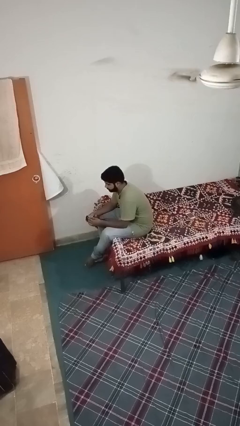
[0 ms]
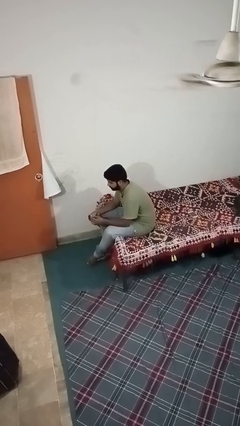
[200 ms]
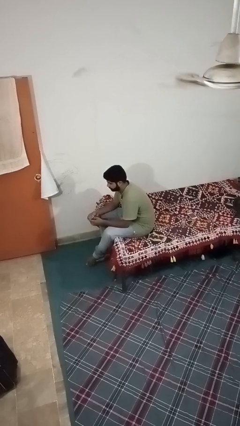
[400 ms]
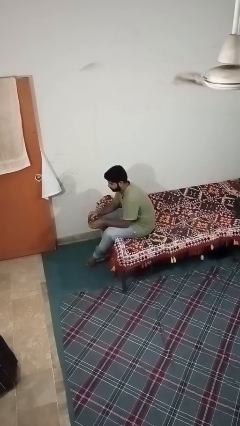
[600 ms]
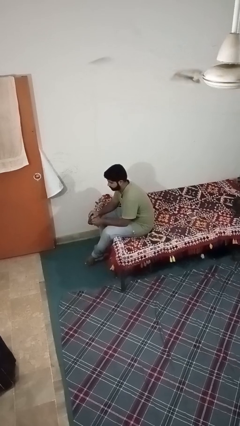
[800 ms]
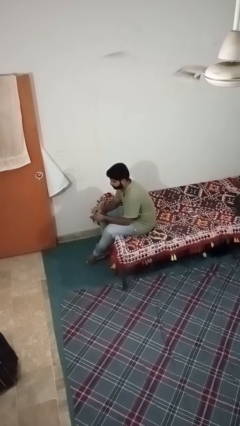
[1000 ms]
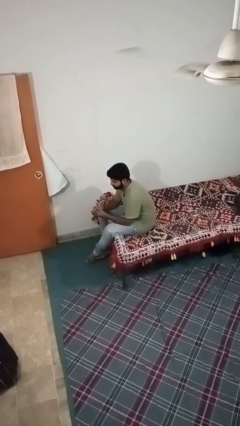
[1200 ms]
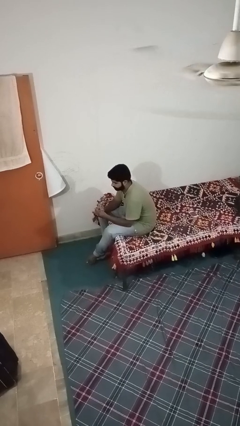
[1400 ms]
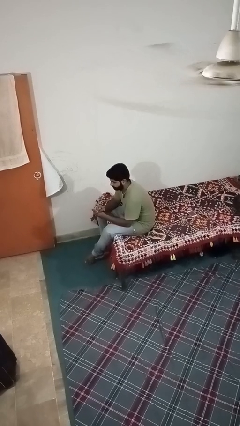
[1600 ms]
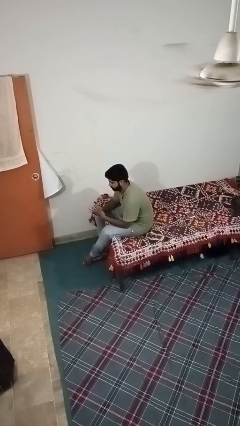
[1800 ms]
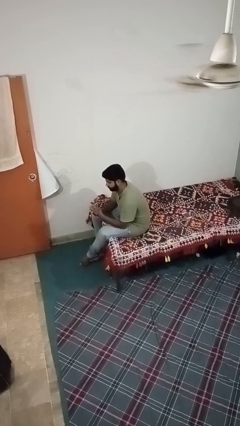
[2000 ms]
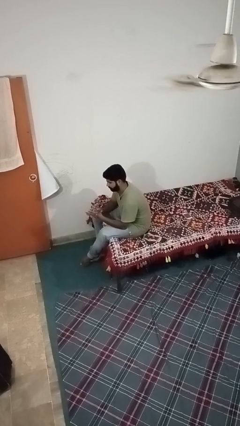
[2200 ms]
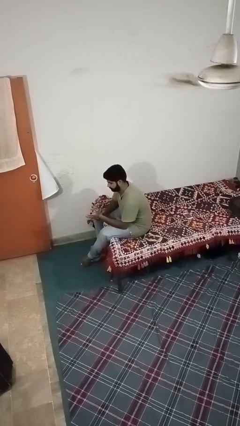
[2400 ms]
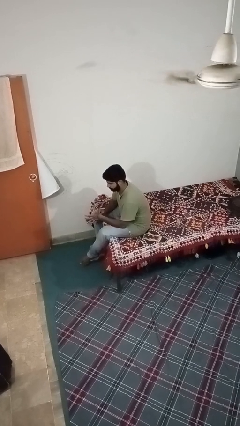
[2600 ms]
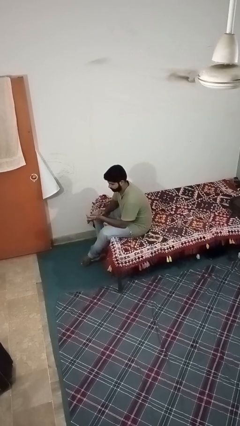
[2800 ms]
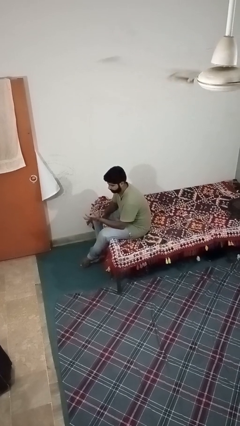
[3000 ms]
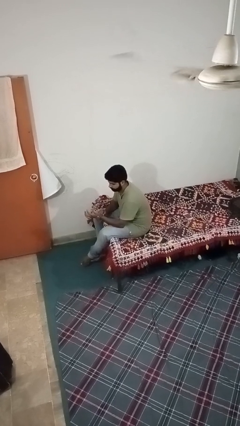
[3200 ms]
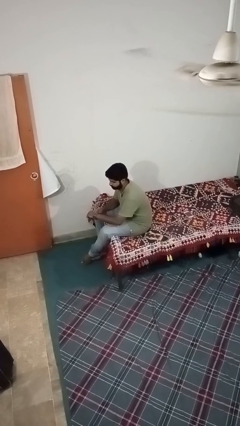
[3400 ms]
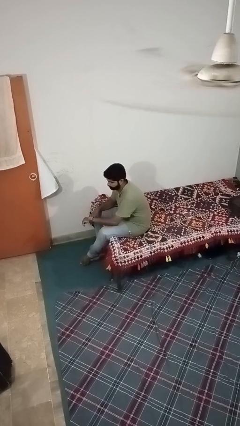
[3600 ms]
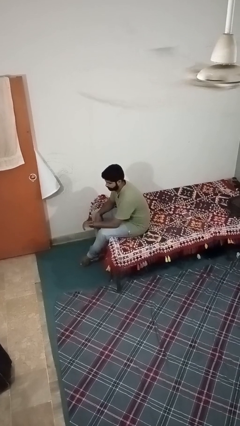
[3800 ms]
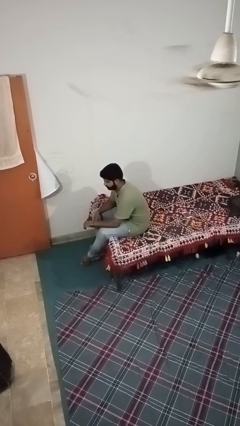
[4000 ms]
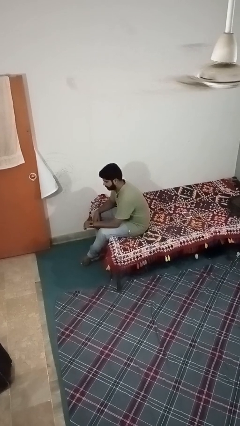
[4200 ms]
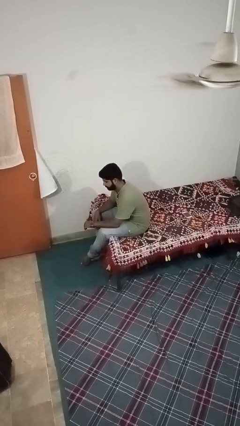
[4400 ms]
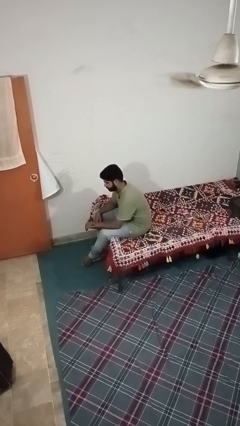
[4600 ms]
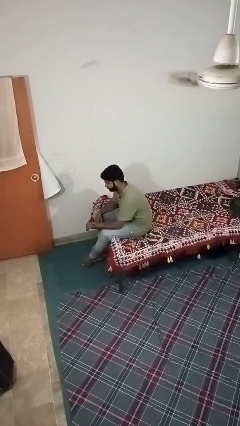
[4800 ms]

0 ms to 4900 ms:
person puts on wristwatch

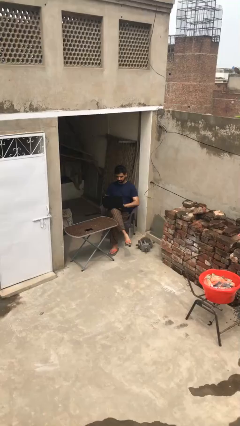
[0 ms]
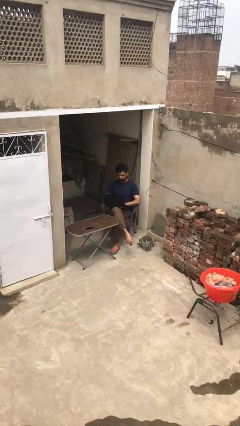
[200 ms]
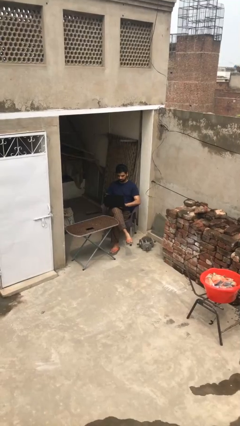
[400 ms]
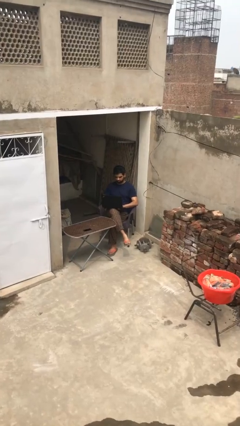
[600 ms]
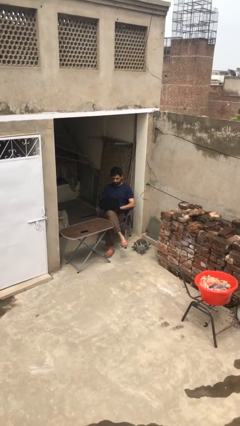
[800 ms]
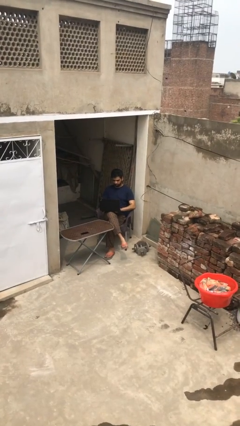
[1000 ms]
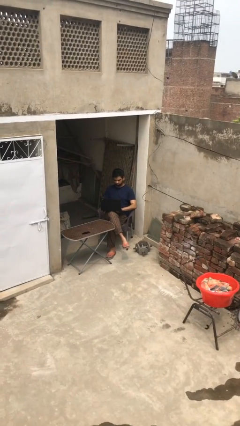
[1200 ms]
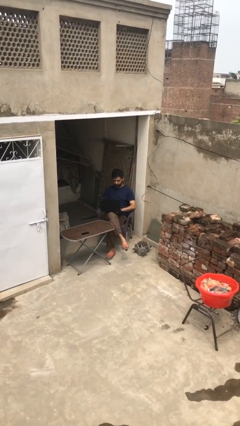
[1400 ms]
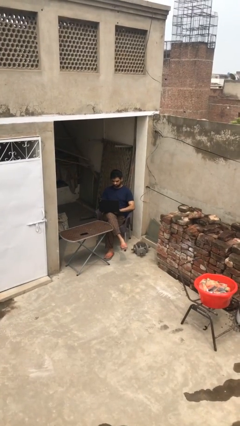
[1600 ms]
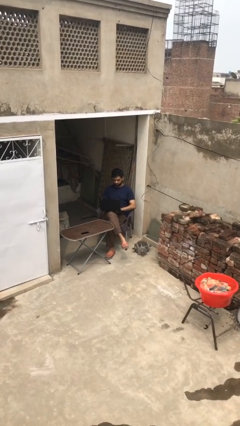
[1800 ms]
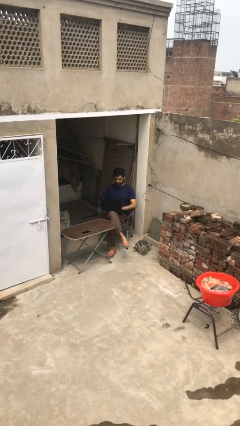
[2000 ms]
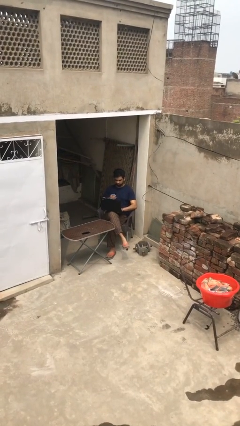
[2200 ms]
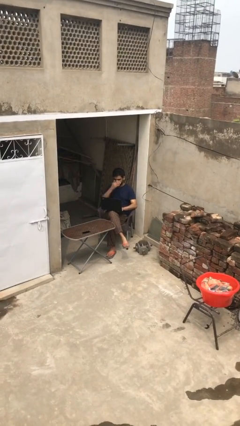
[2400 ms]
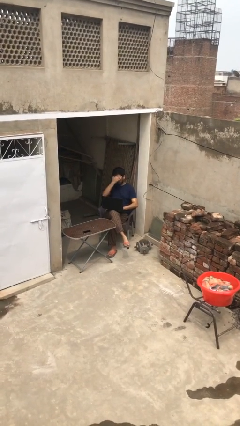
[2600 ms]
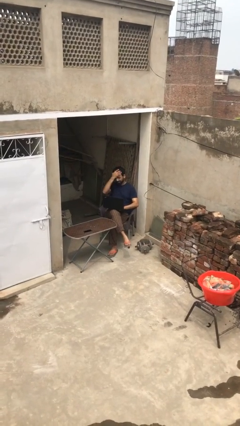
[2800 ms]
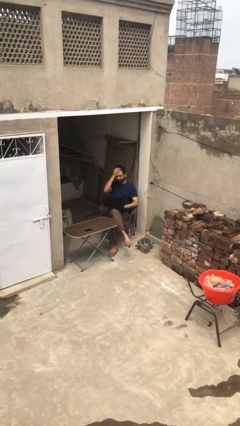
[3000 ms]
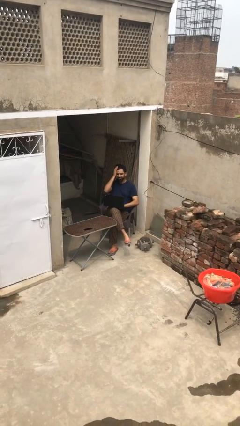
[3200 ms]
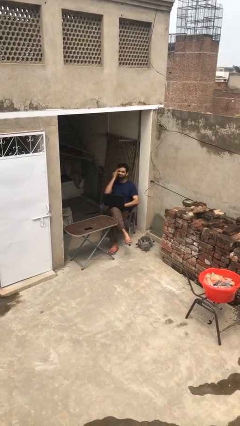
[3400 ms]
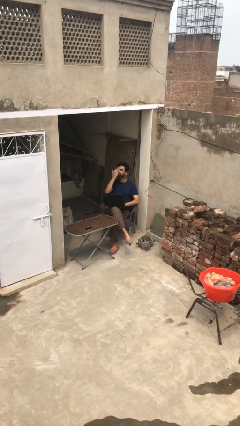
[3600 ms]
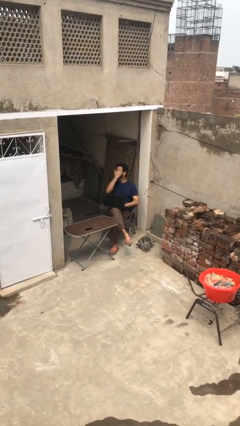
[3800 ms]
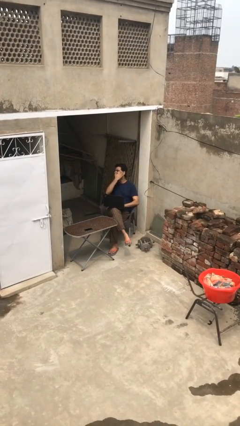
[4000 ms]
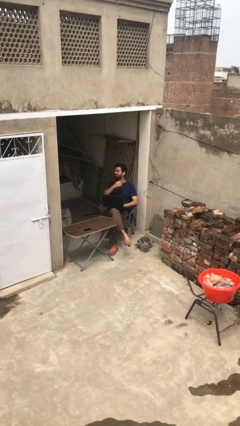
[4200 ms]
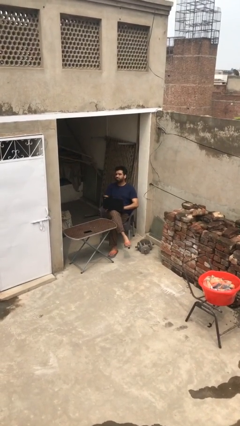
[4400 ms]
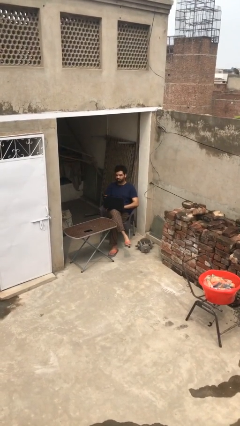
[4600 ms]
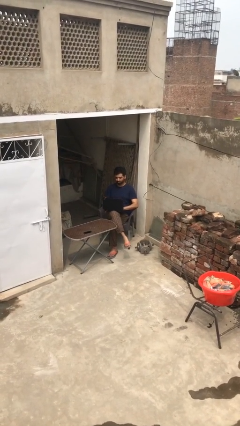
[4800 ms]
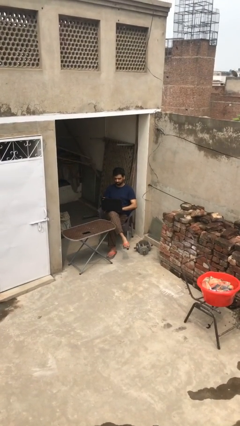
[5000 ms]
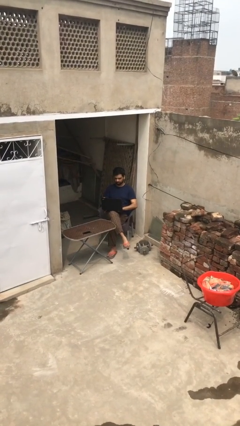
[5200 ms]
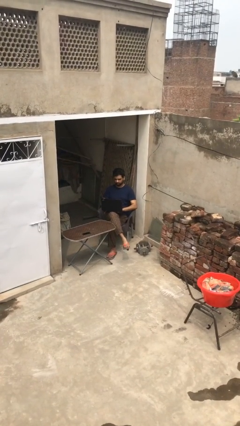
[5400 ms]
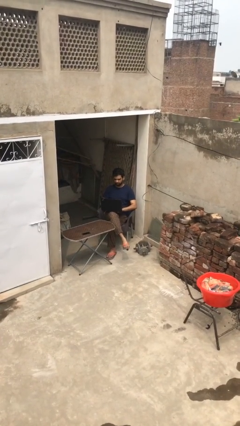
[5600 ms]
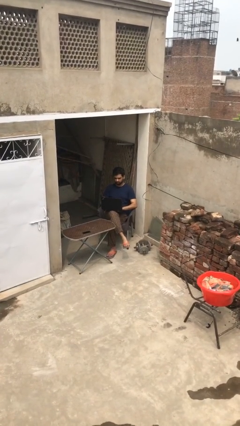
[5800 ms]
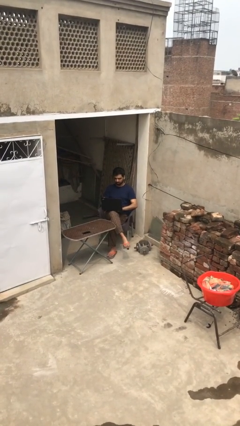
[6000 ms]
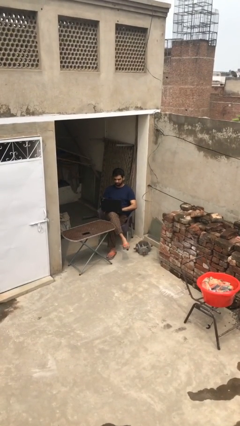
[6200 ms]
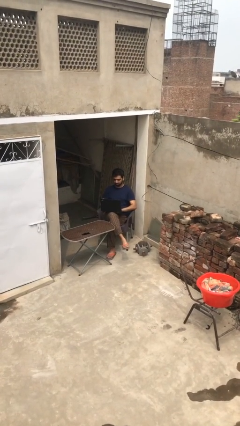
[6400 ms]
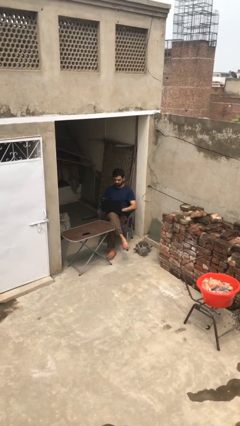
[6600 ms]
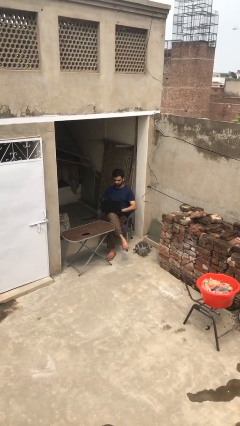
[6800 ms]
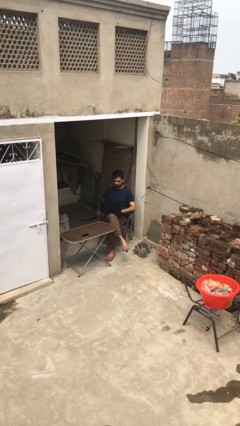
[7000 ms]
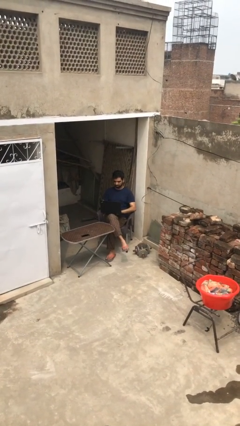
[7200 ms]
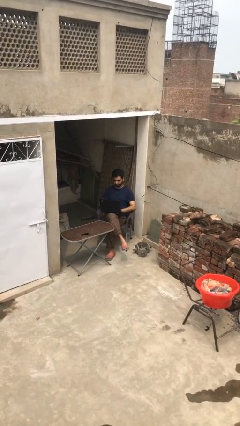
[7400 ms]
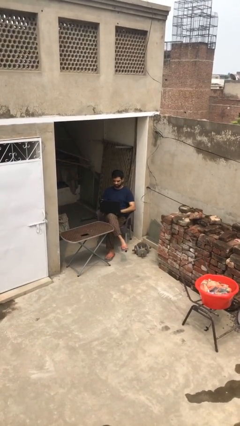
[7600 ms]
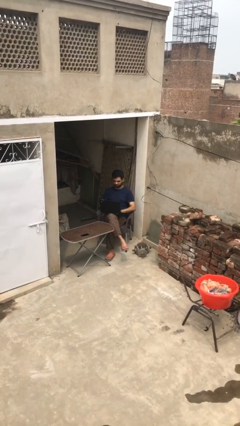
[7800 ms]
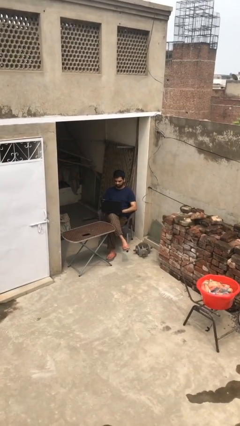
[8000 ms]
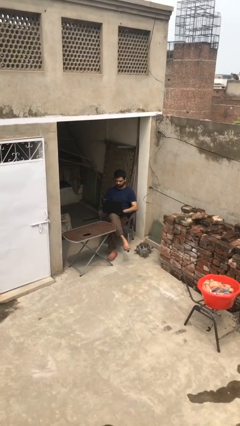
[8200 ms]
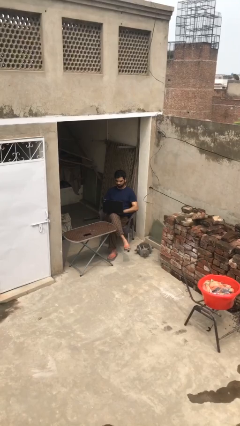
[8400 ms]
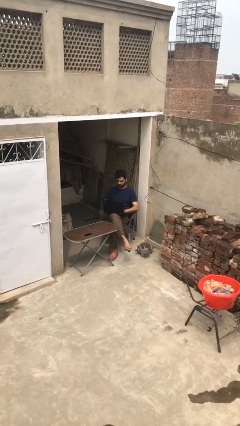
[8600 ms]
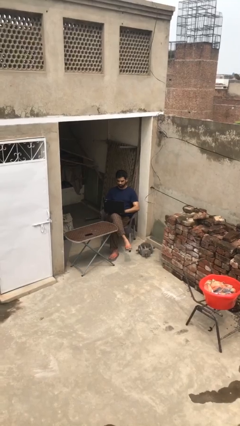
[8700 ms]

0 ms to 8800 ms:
person interacts with laptop

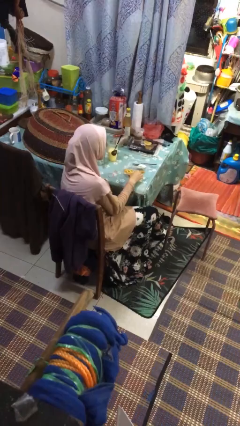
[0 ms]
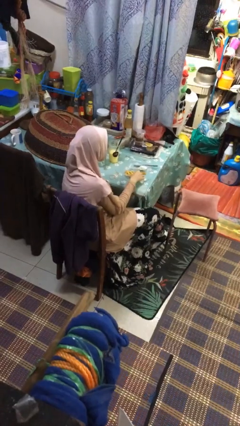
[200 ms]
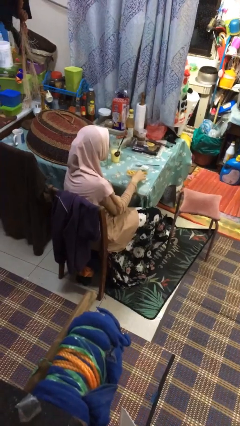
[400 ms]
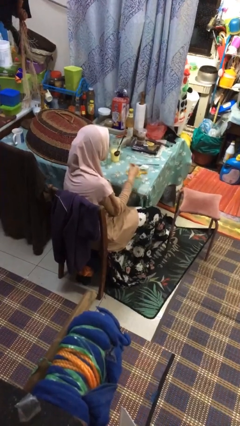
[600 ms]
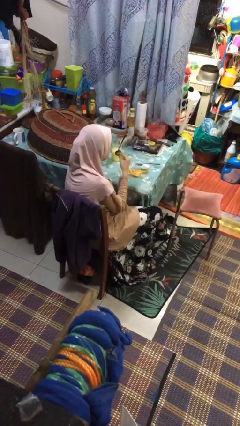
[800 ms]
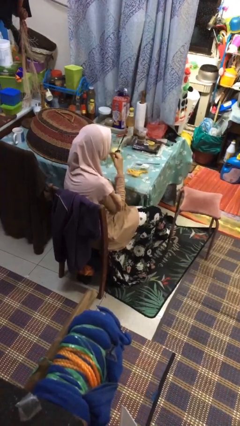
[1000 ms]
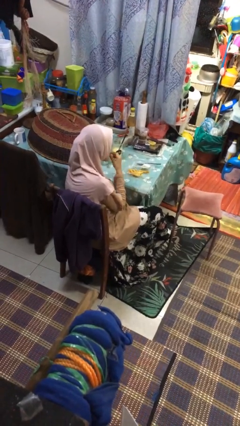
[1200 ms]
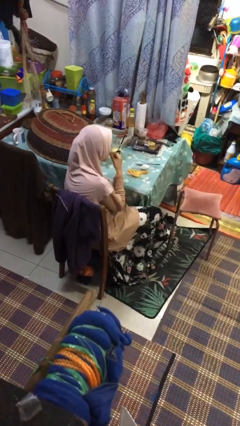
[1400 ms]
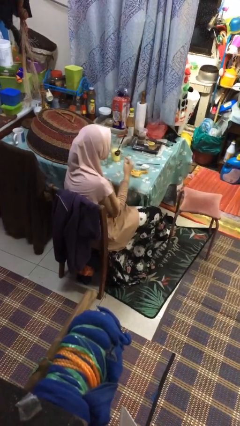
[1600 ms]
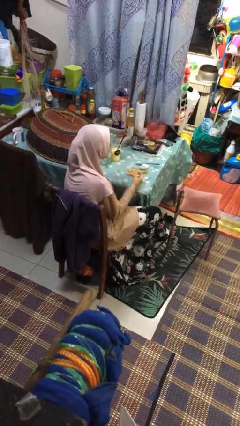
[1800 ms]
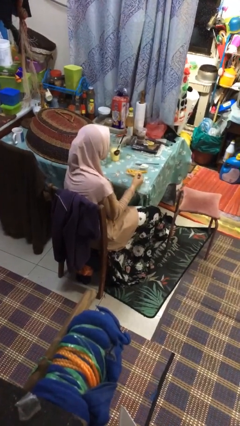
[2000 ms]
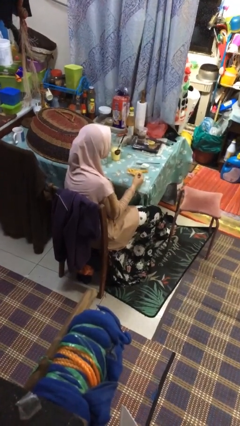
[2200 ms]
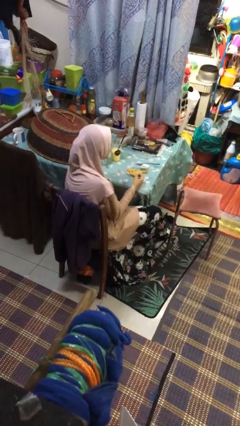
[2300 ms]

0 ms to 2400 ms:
person eats with hands

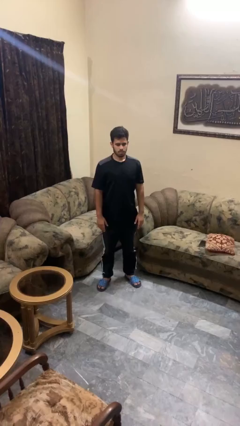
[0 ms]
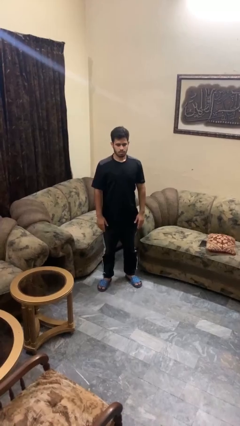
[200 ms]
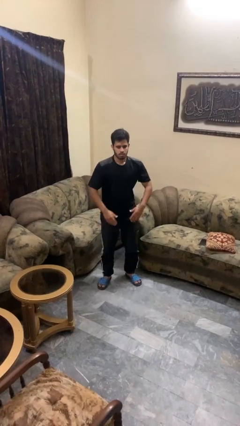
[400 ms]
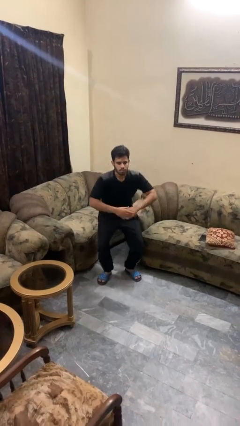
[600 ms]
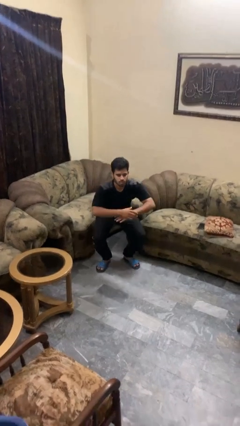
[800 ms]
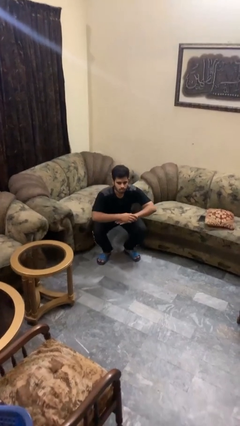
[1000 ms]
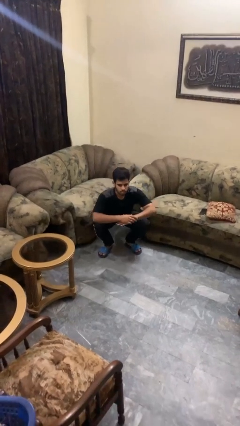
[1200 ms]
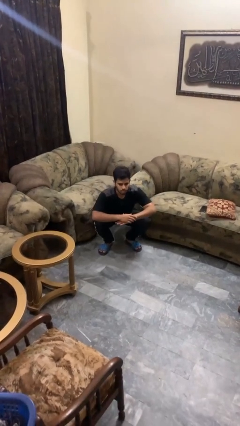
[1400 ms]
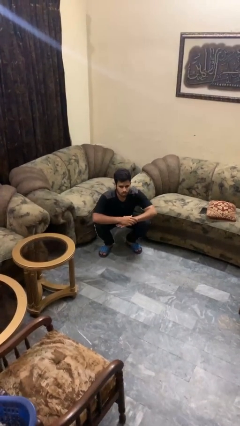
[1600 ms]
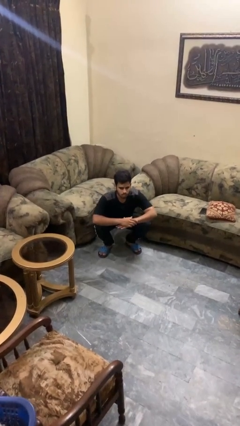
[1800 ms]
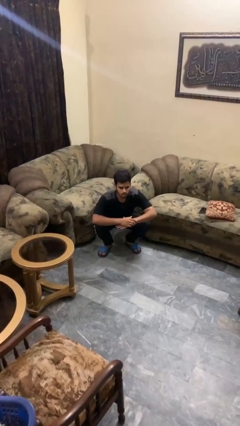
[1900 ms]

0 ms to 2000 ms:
person squats

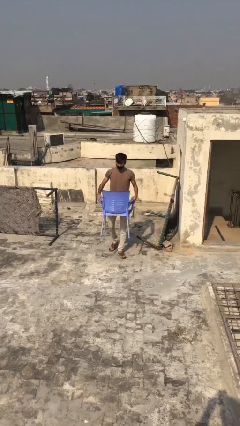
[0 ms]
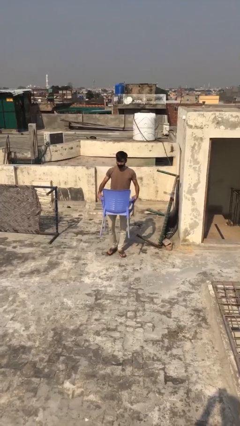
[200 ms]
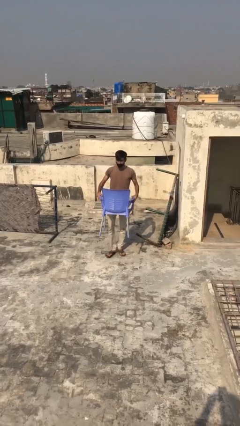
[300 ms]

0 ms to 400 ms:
person puts down object on floor
